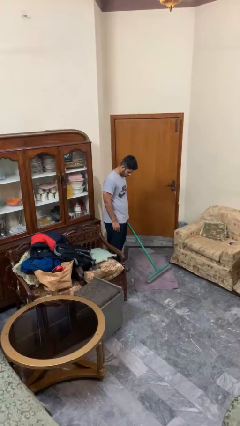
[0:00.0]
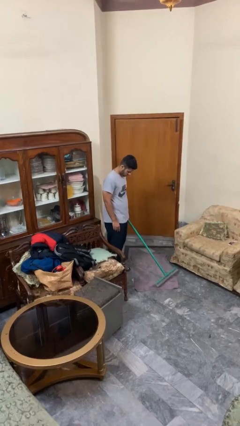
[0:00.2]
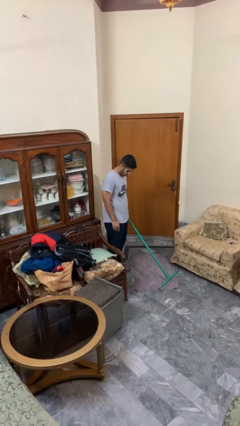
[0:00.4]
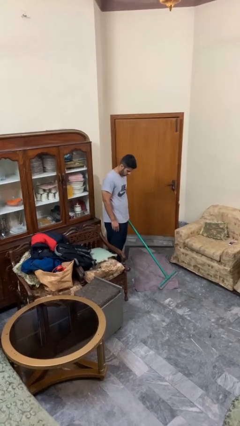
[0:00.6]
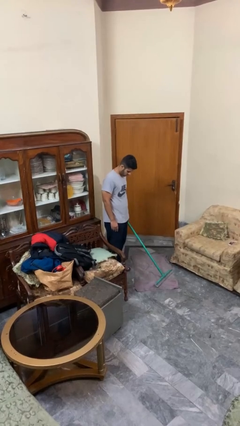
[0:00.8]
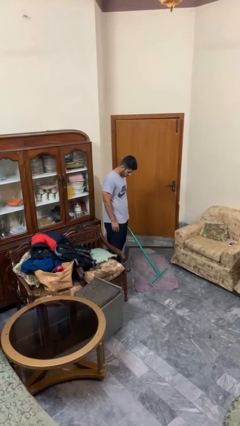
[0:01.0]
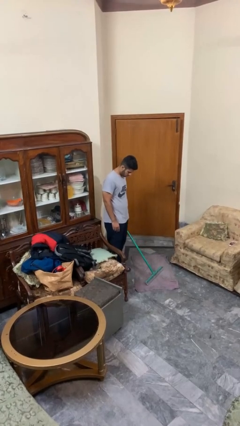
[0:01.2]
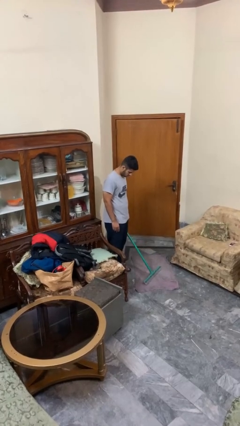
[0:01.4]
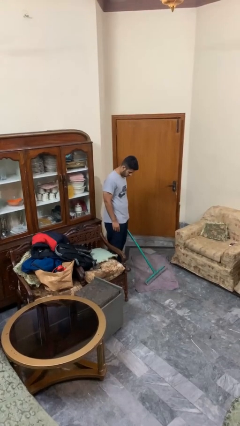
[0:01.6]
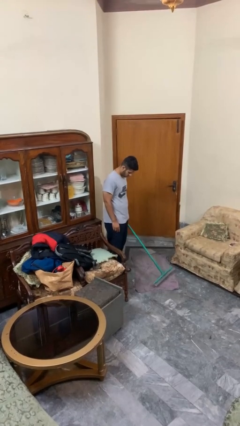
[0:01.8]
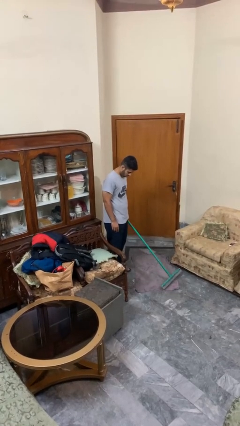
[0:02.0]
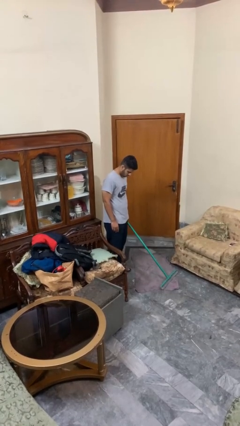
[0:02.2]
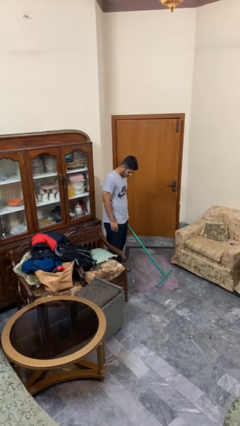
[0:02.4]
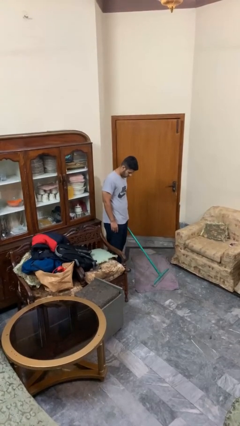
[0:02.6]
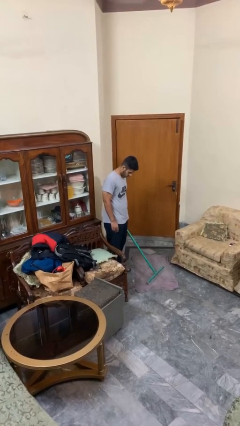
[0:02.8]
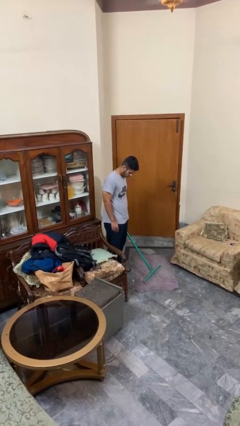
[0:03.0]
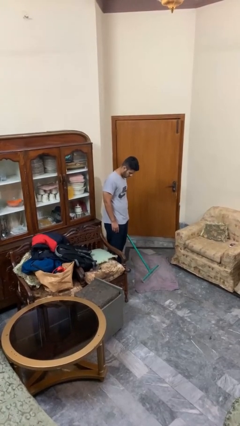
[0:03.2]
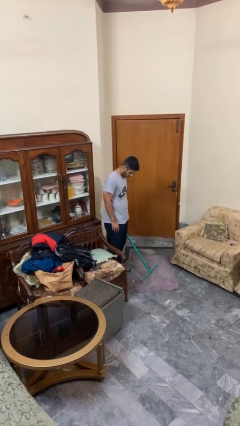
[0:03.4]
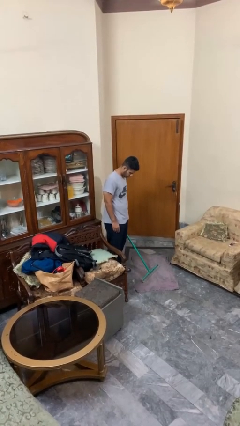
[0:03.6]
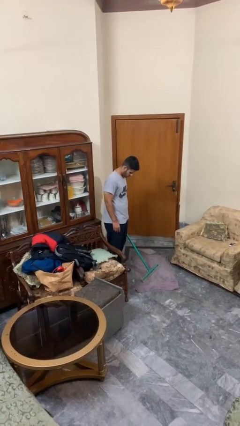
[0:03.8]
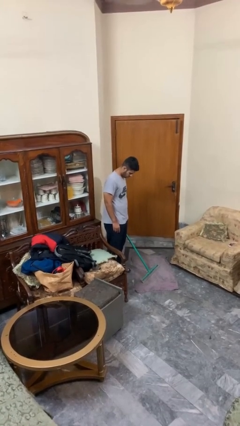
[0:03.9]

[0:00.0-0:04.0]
person vacuums carpet

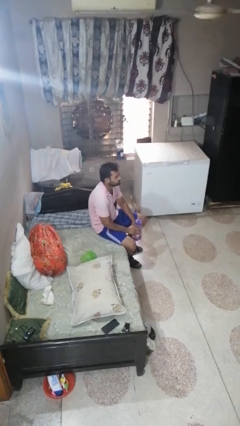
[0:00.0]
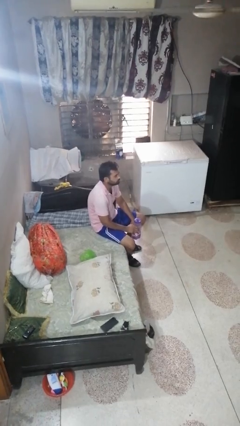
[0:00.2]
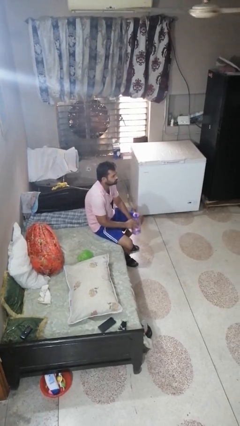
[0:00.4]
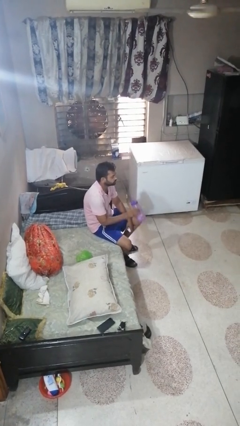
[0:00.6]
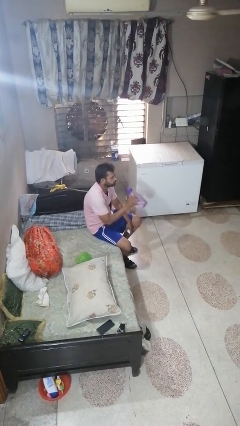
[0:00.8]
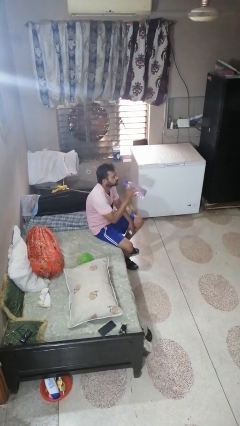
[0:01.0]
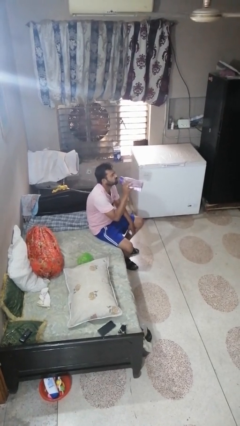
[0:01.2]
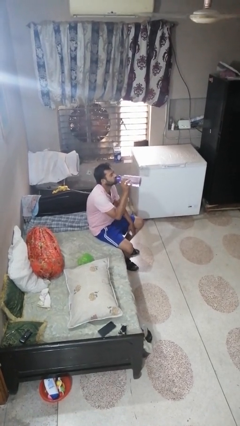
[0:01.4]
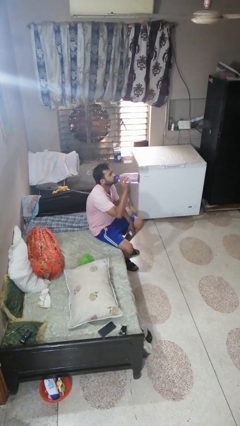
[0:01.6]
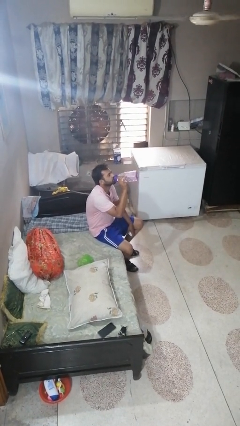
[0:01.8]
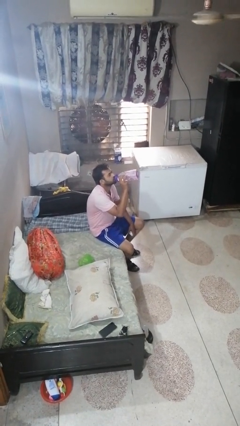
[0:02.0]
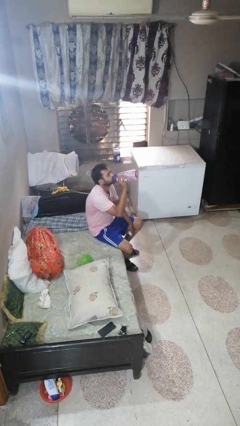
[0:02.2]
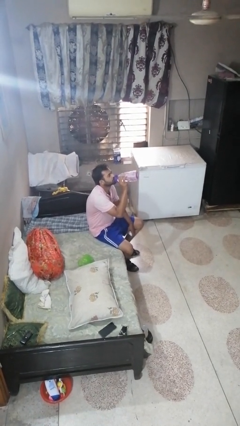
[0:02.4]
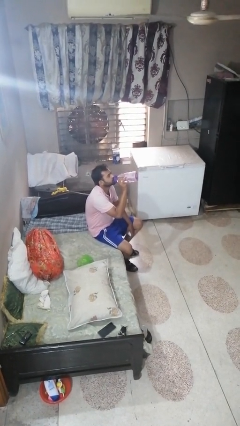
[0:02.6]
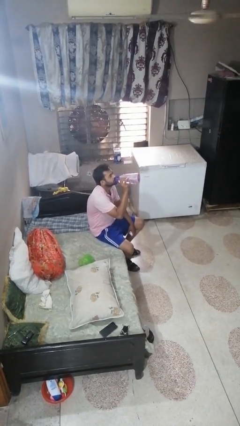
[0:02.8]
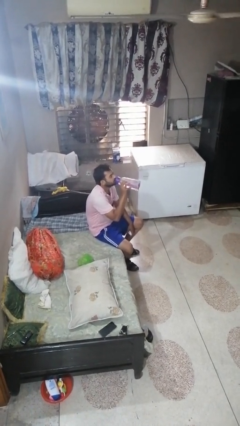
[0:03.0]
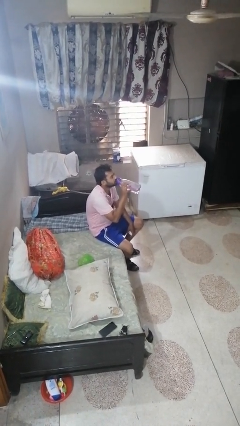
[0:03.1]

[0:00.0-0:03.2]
person drinks from bottle

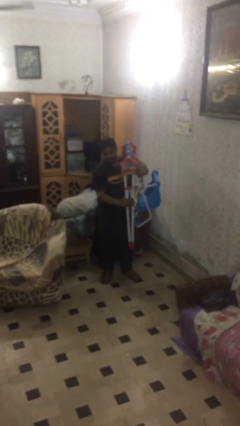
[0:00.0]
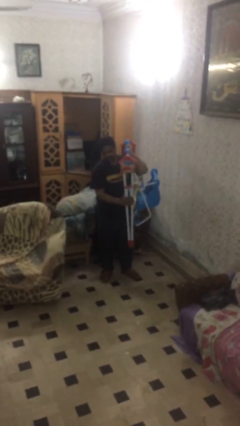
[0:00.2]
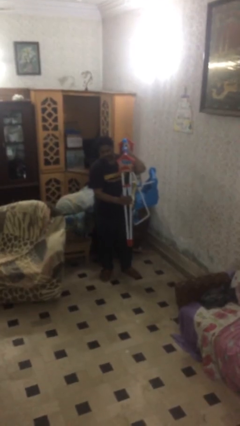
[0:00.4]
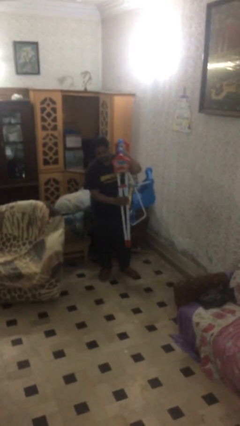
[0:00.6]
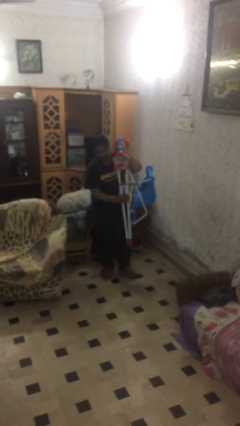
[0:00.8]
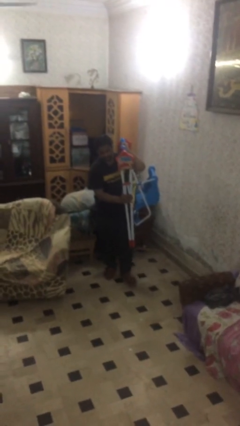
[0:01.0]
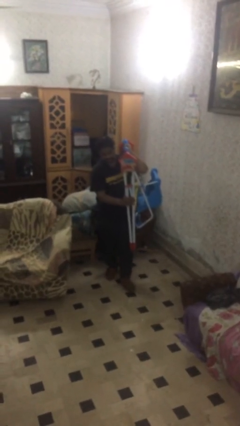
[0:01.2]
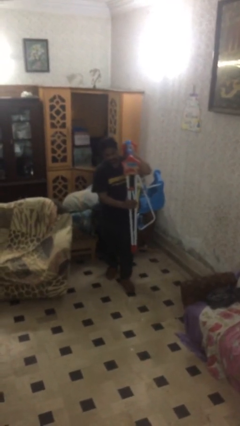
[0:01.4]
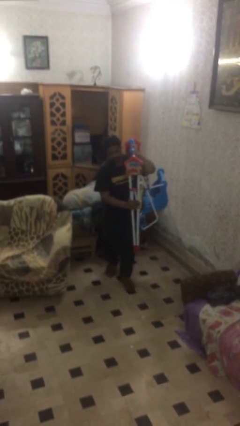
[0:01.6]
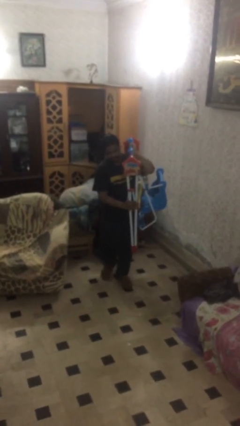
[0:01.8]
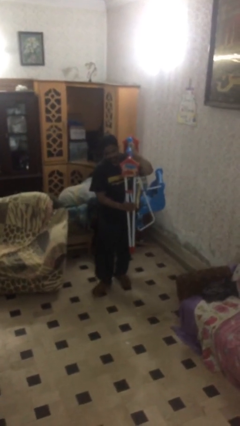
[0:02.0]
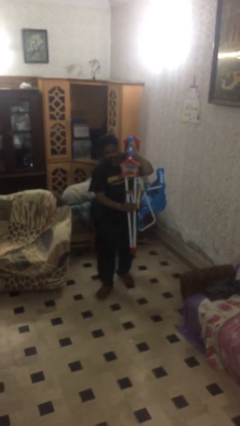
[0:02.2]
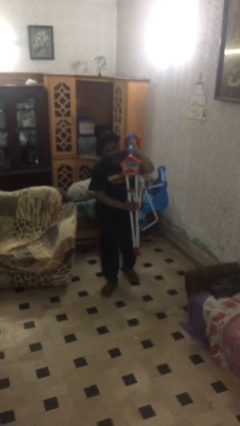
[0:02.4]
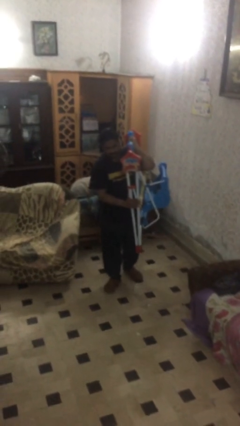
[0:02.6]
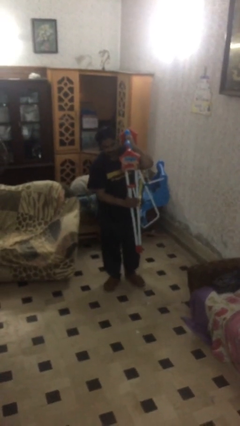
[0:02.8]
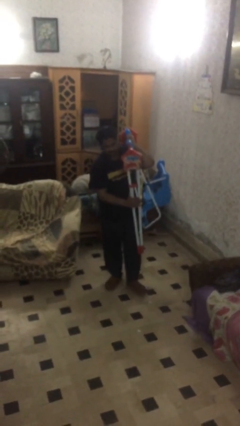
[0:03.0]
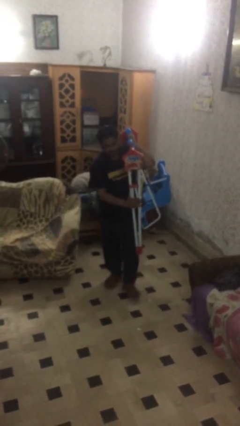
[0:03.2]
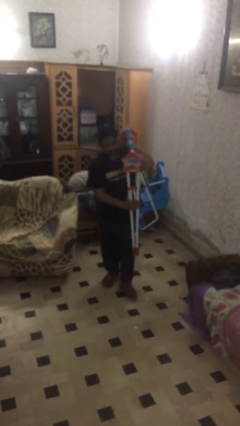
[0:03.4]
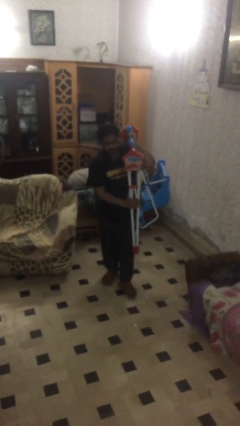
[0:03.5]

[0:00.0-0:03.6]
person carries heavy object

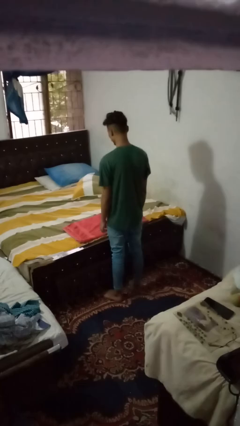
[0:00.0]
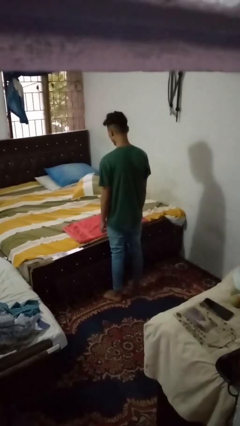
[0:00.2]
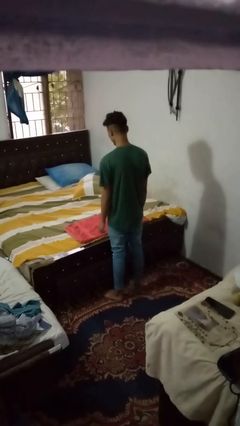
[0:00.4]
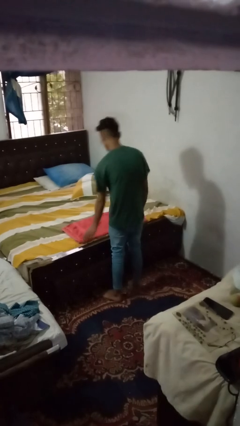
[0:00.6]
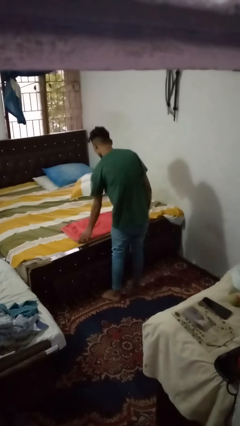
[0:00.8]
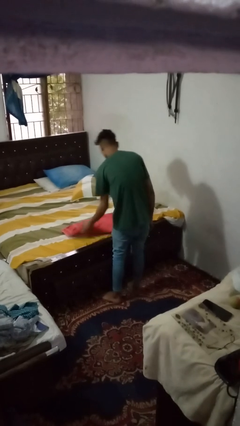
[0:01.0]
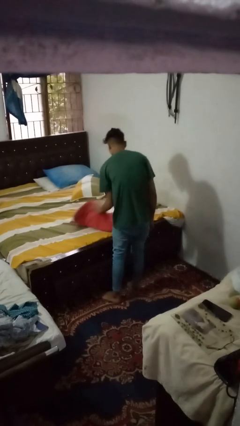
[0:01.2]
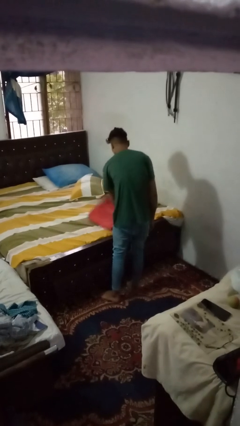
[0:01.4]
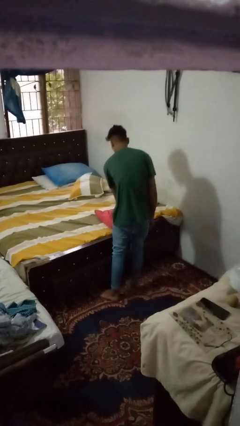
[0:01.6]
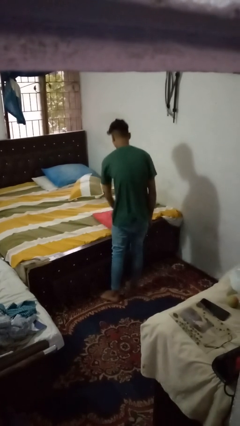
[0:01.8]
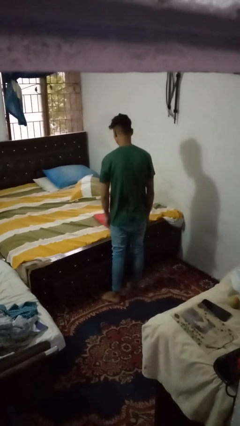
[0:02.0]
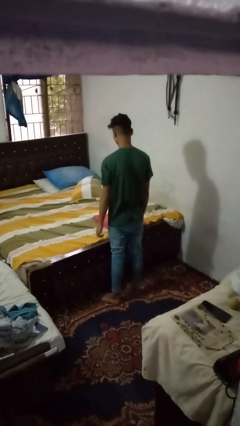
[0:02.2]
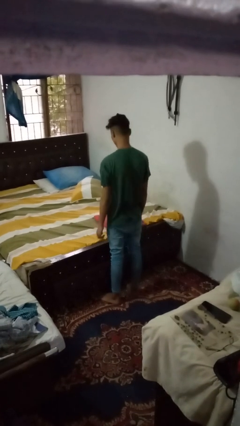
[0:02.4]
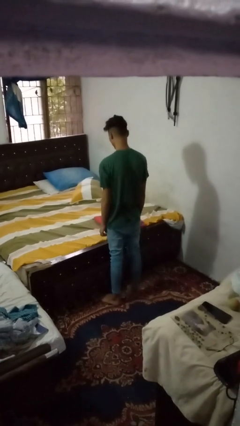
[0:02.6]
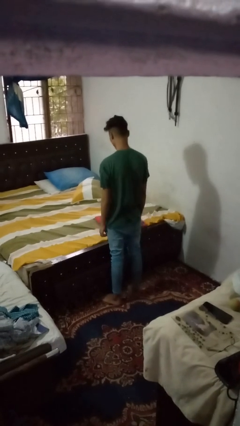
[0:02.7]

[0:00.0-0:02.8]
person folds towel

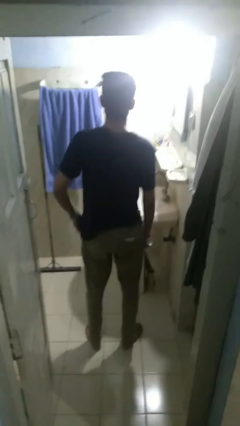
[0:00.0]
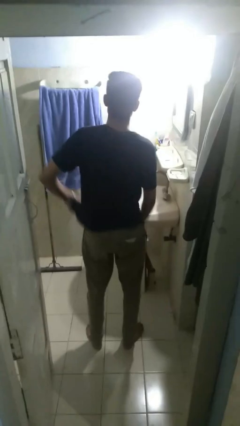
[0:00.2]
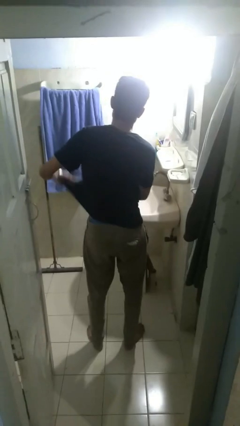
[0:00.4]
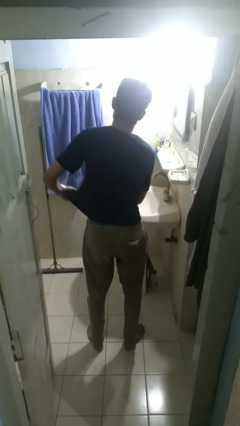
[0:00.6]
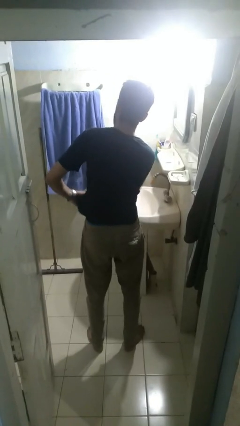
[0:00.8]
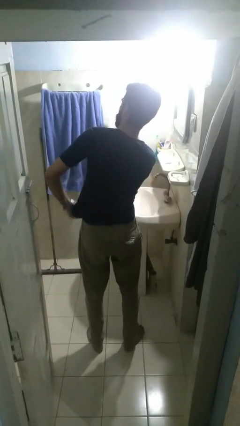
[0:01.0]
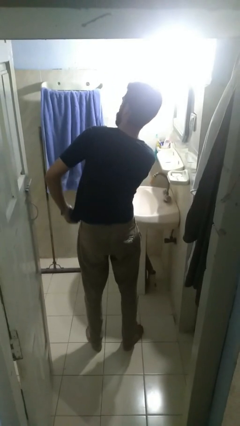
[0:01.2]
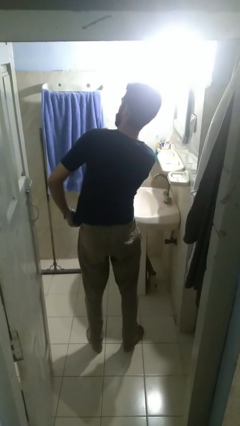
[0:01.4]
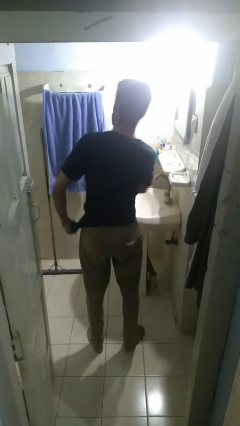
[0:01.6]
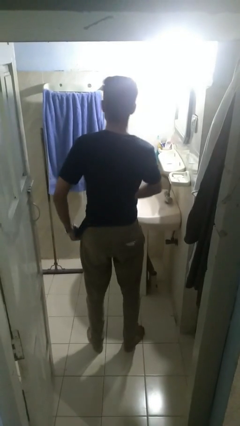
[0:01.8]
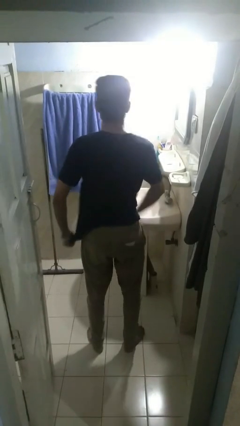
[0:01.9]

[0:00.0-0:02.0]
person applies deodorant

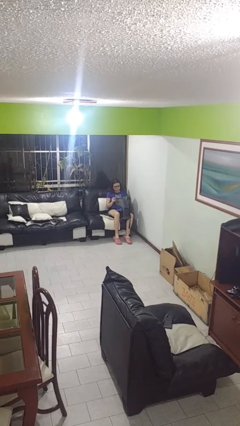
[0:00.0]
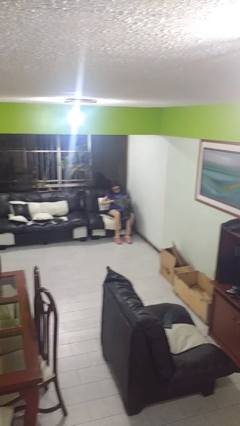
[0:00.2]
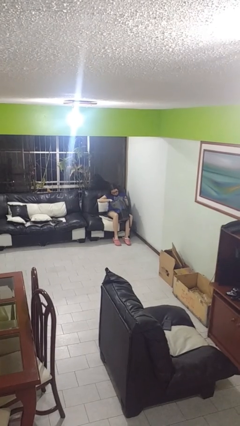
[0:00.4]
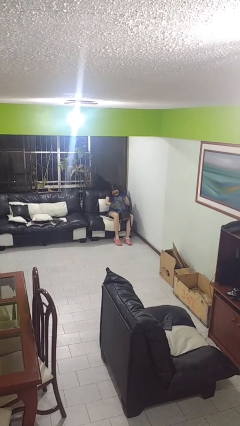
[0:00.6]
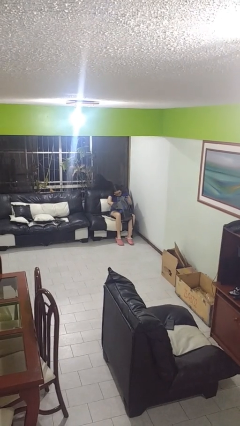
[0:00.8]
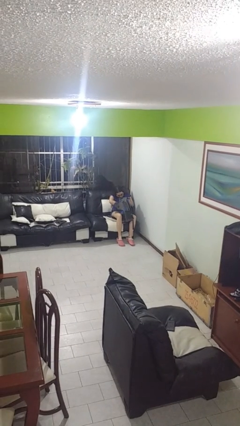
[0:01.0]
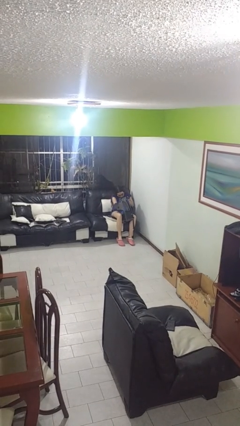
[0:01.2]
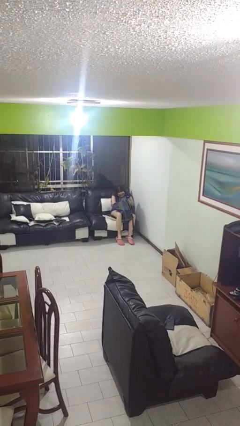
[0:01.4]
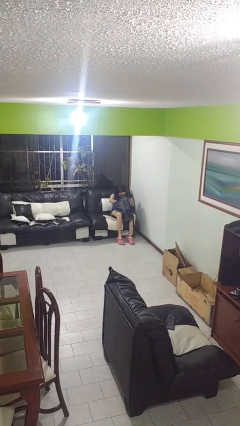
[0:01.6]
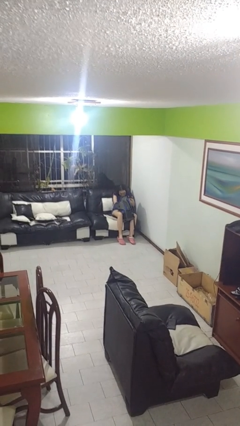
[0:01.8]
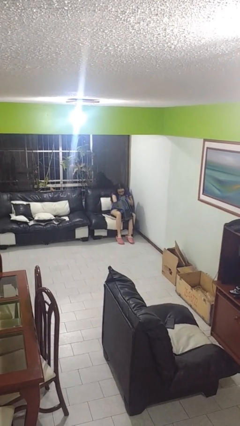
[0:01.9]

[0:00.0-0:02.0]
person searches in backpack
